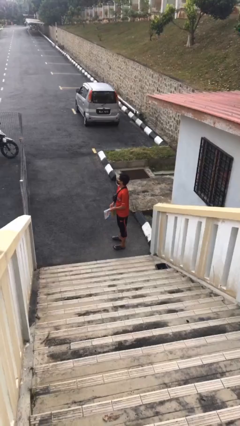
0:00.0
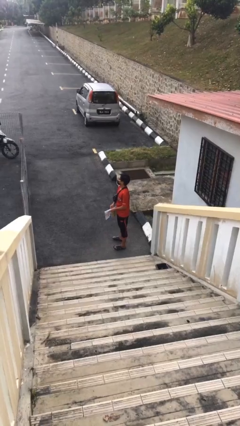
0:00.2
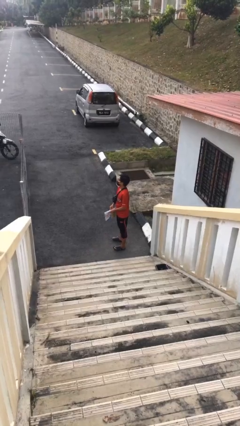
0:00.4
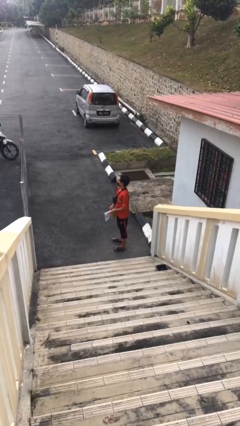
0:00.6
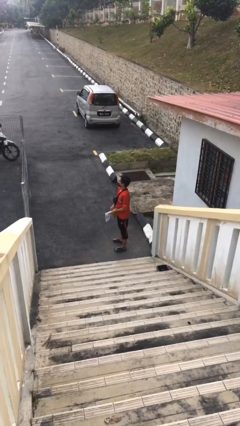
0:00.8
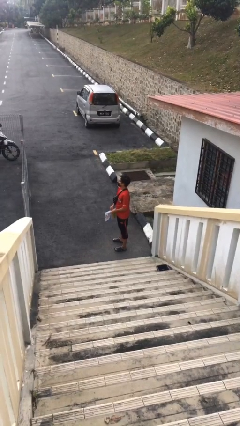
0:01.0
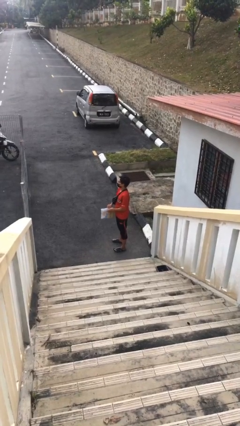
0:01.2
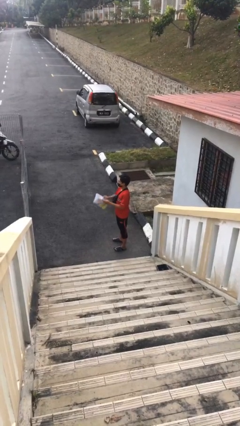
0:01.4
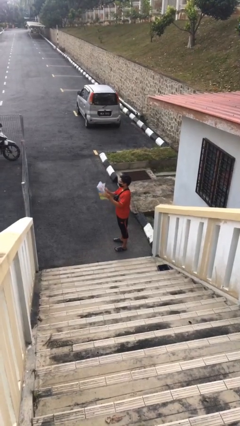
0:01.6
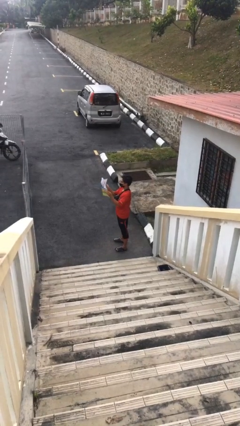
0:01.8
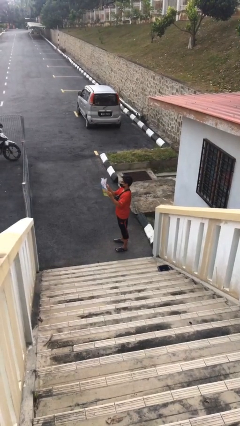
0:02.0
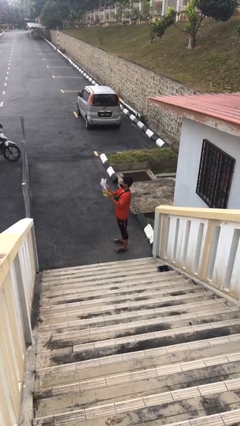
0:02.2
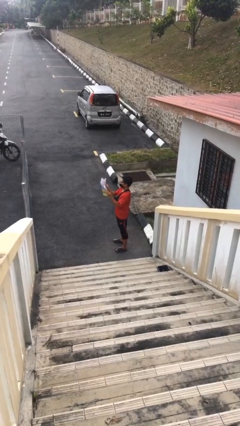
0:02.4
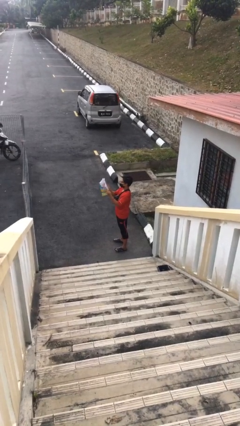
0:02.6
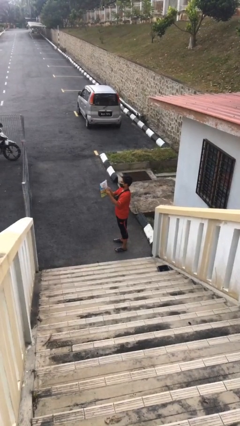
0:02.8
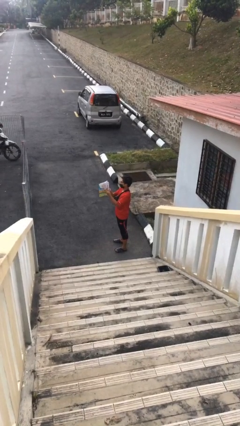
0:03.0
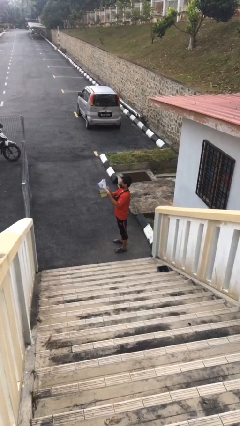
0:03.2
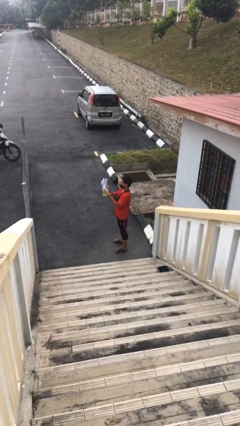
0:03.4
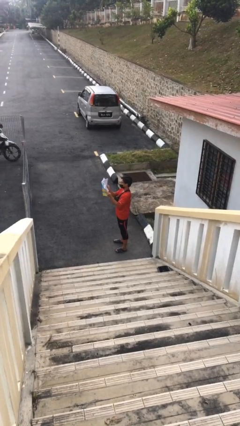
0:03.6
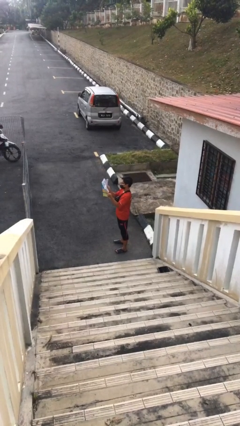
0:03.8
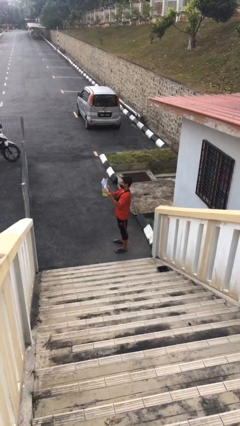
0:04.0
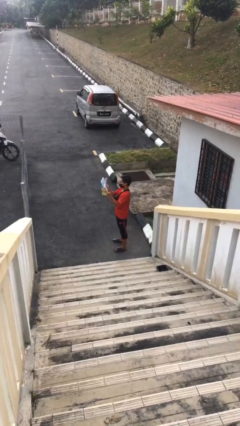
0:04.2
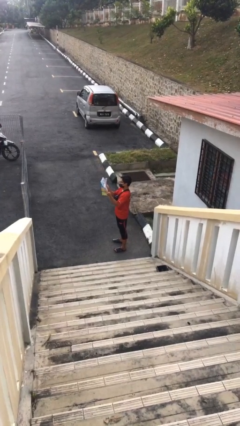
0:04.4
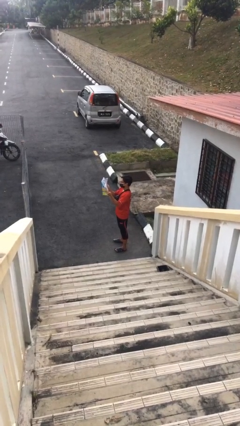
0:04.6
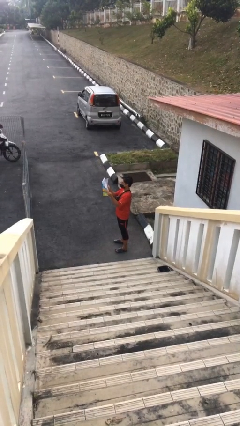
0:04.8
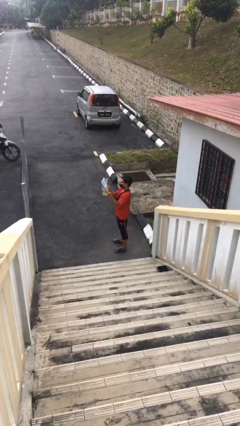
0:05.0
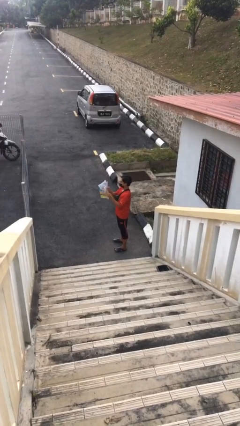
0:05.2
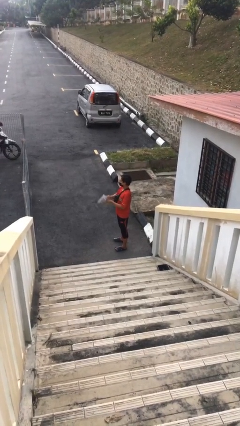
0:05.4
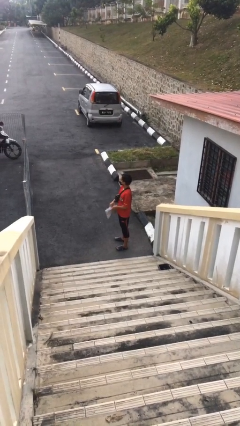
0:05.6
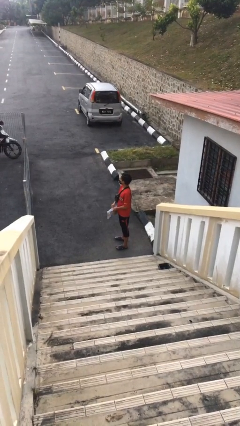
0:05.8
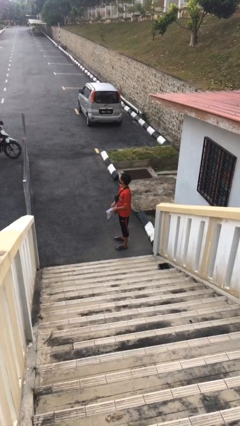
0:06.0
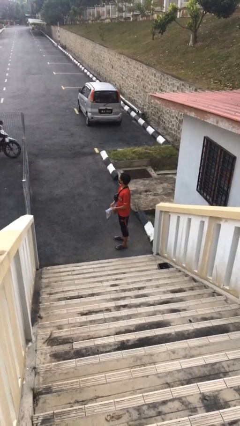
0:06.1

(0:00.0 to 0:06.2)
person reads document

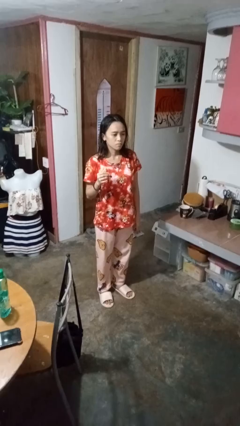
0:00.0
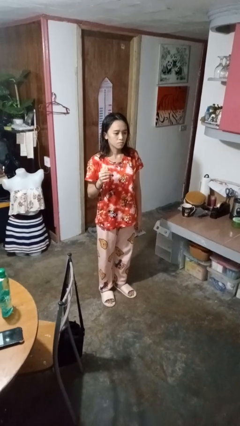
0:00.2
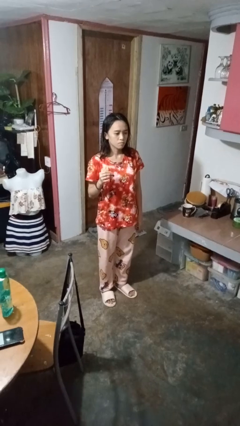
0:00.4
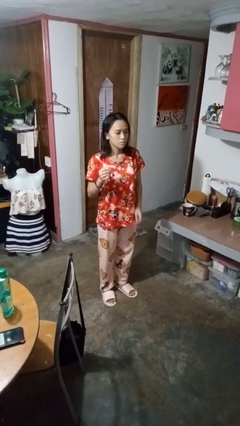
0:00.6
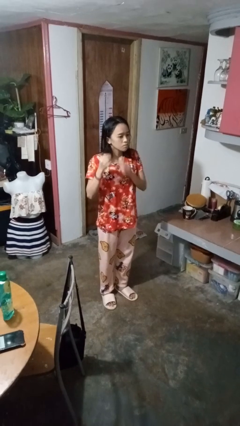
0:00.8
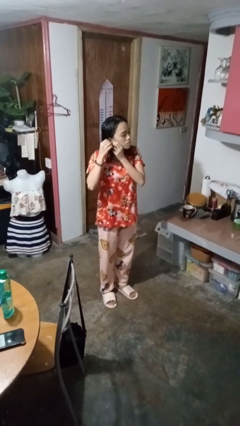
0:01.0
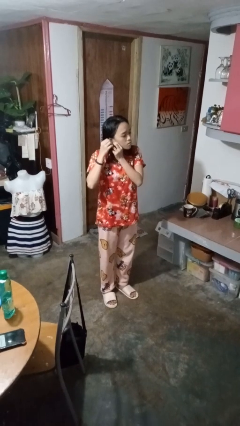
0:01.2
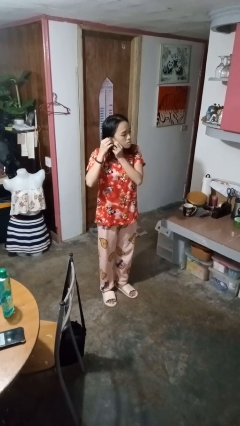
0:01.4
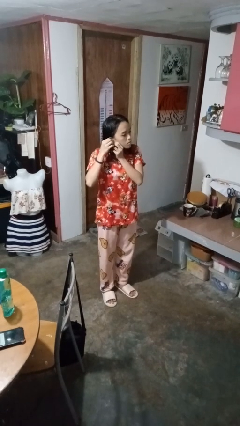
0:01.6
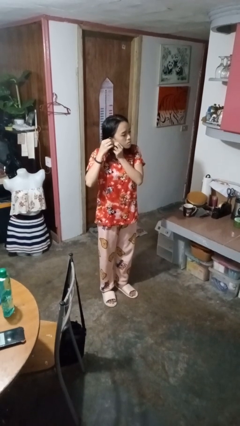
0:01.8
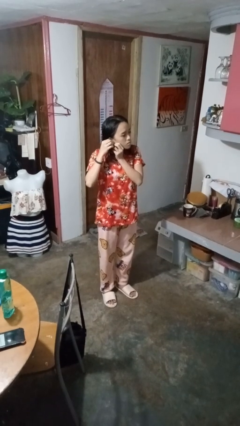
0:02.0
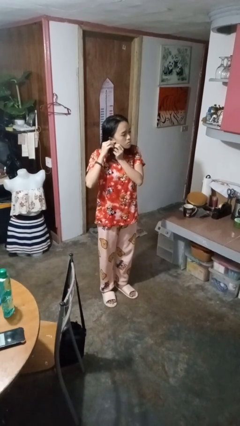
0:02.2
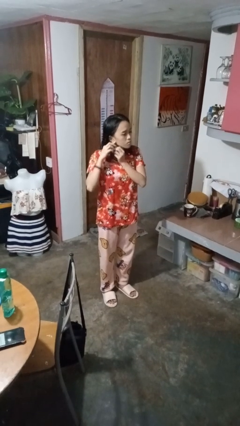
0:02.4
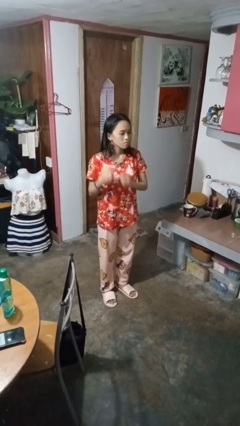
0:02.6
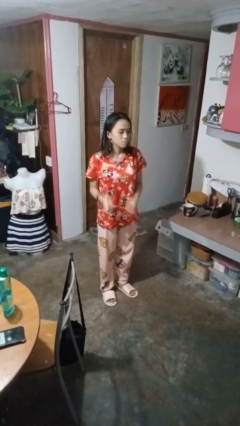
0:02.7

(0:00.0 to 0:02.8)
person puts on earrings

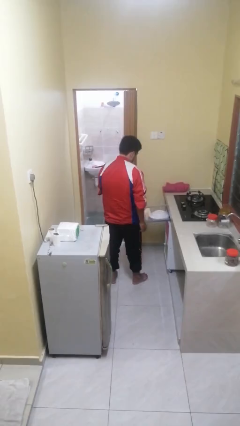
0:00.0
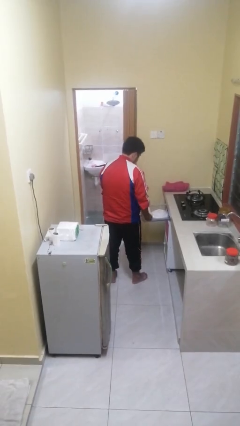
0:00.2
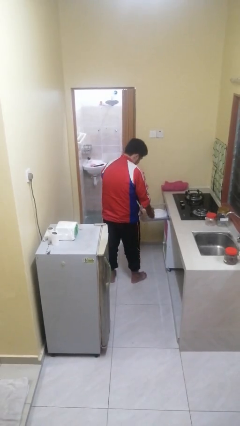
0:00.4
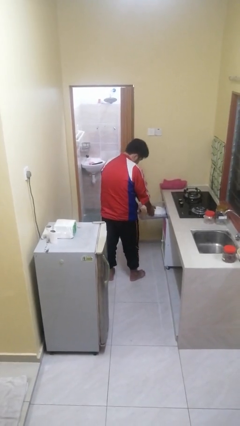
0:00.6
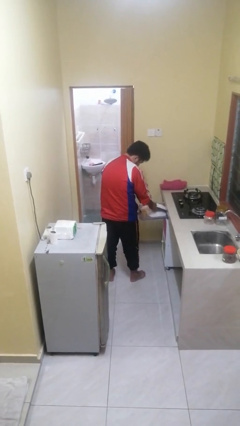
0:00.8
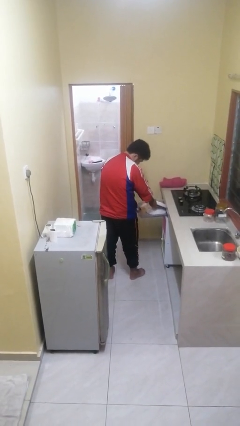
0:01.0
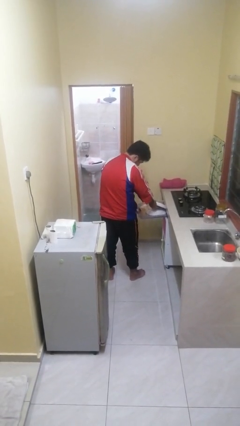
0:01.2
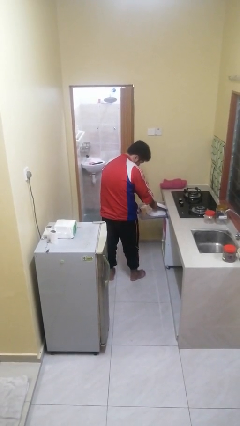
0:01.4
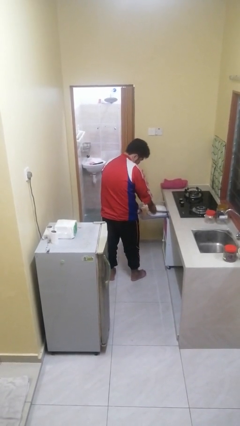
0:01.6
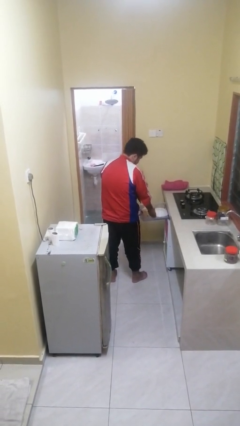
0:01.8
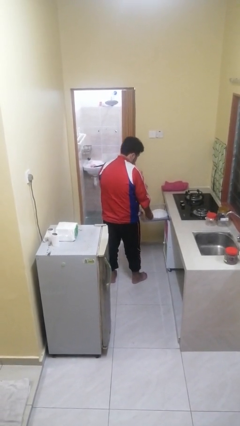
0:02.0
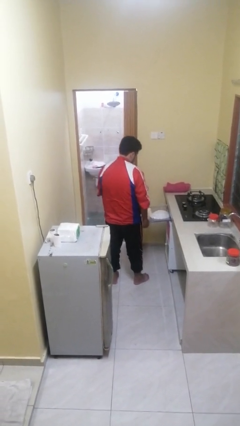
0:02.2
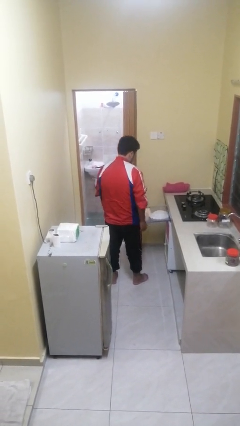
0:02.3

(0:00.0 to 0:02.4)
person searches in kitchen drawer

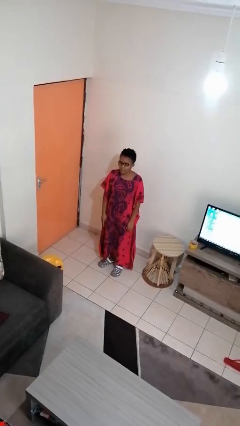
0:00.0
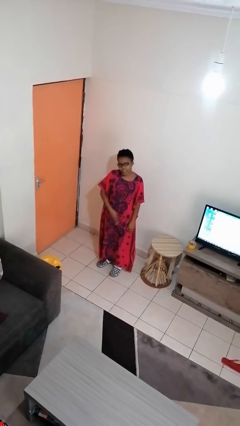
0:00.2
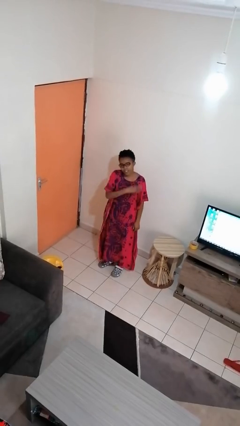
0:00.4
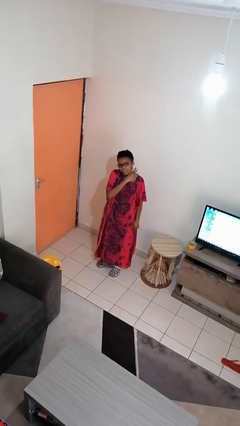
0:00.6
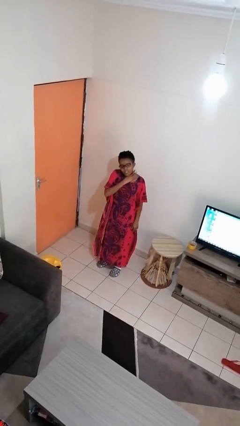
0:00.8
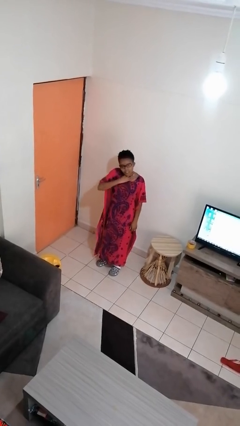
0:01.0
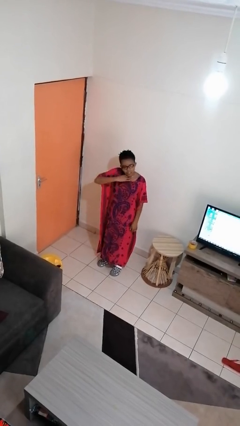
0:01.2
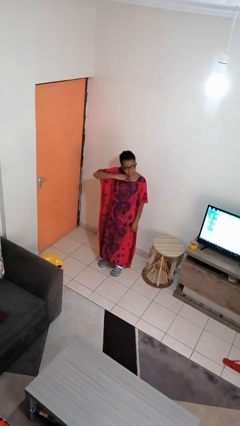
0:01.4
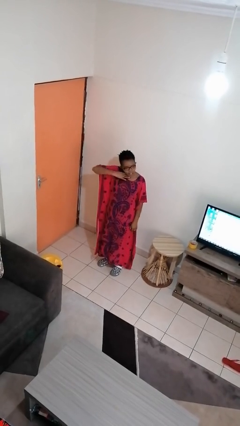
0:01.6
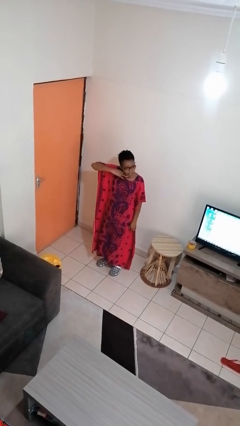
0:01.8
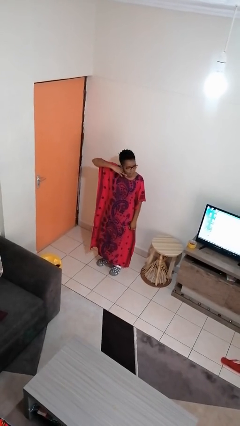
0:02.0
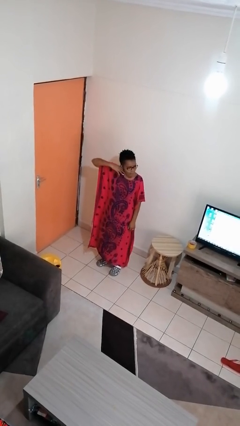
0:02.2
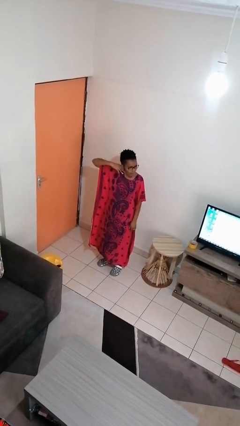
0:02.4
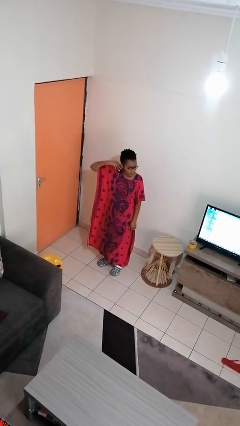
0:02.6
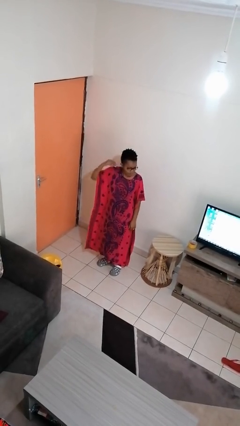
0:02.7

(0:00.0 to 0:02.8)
person gestures cut

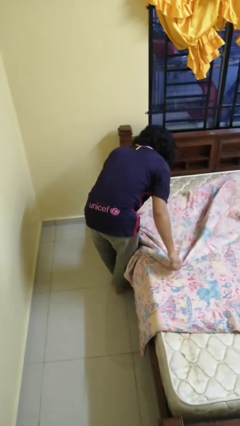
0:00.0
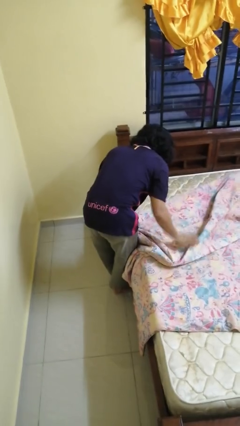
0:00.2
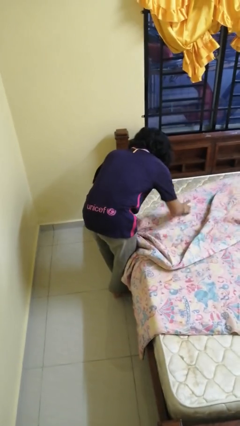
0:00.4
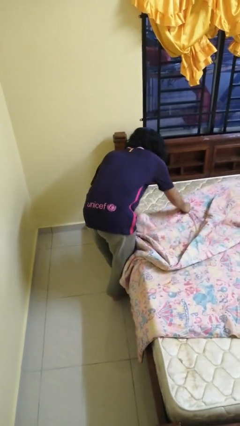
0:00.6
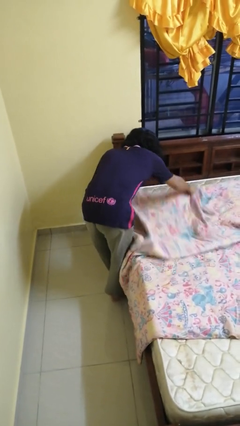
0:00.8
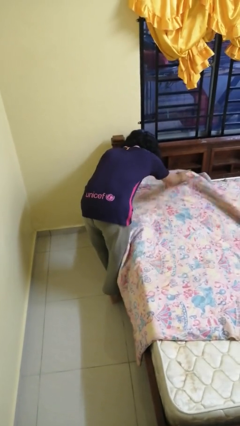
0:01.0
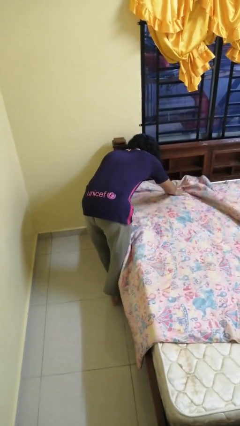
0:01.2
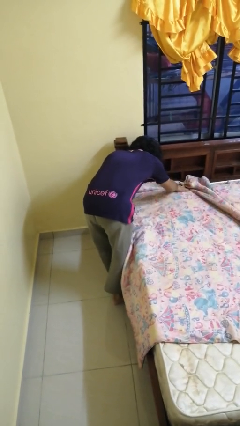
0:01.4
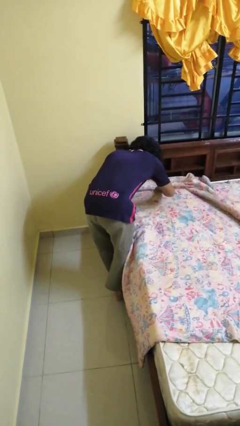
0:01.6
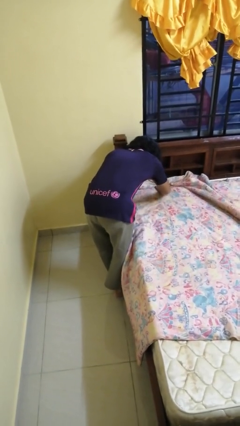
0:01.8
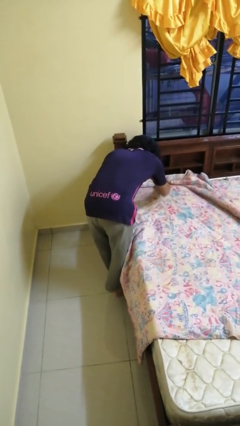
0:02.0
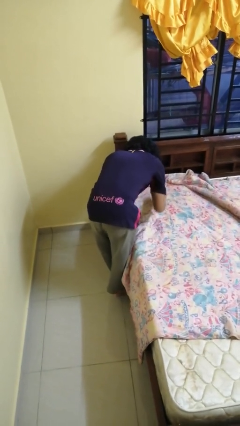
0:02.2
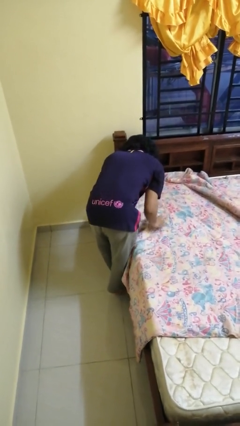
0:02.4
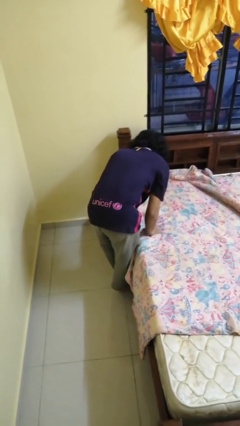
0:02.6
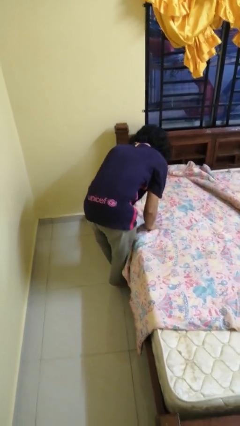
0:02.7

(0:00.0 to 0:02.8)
person makes bed

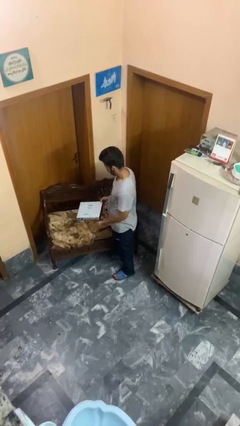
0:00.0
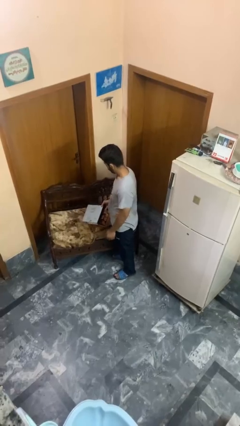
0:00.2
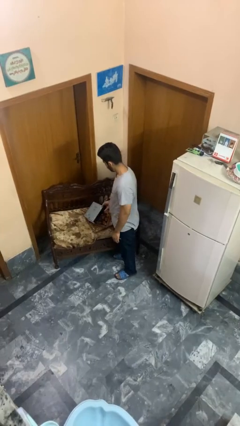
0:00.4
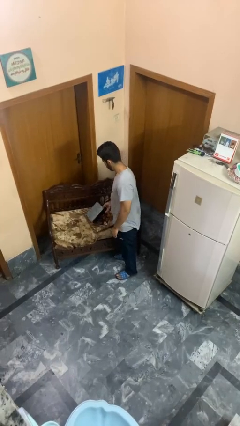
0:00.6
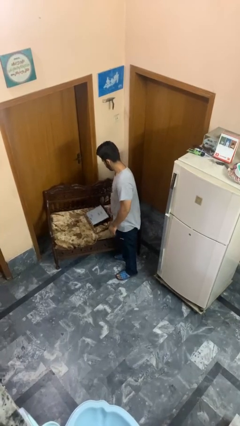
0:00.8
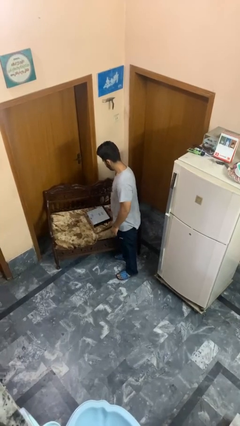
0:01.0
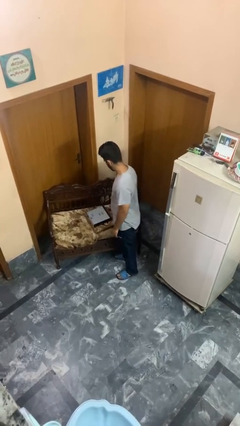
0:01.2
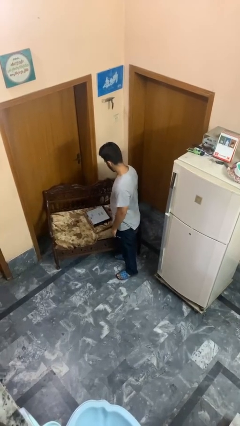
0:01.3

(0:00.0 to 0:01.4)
person puts down object on couch
